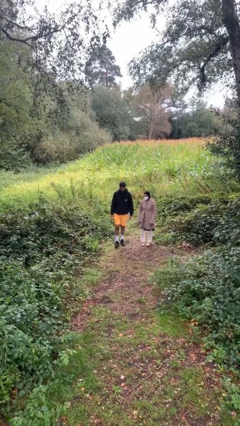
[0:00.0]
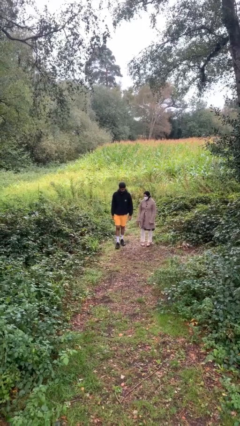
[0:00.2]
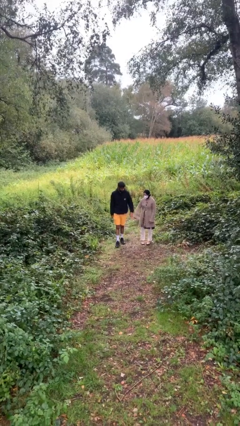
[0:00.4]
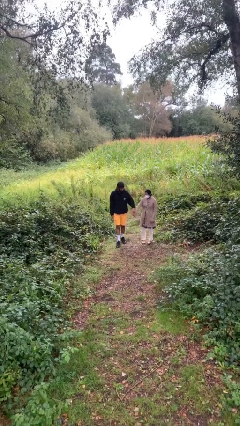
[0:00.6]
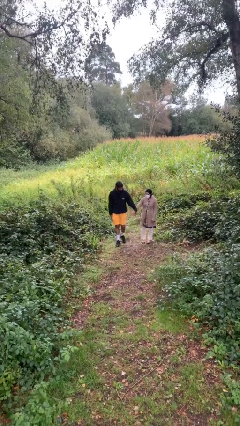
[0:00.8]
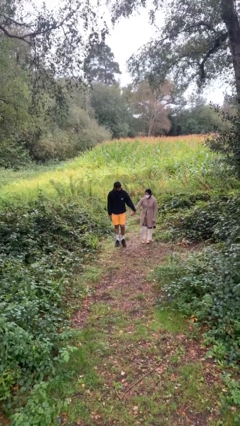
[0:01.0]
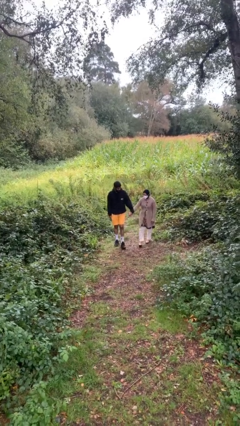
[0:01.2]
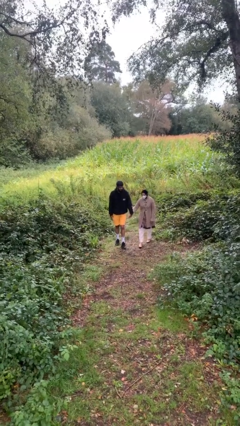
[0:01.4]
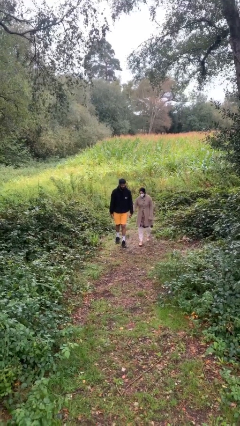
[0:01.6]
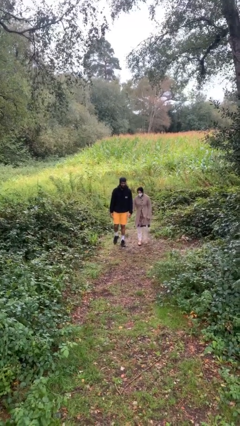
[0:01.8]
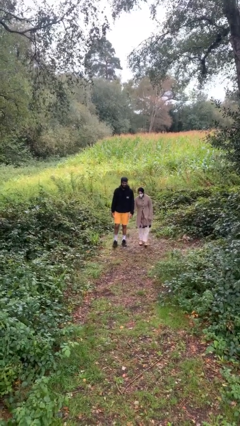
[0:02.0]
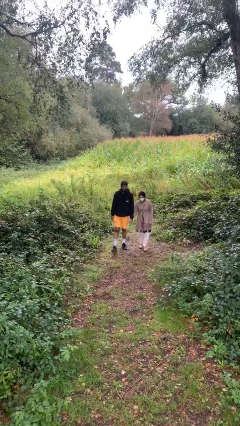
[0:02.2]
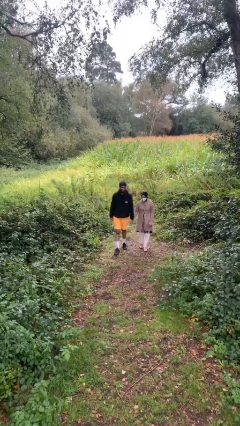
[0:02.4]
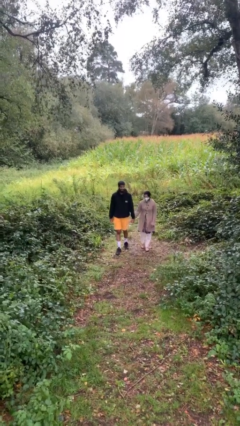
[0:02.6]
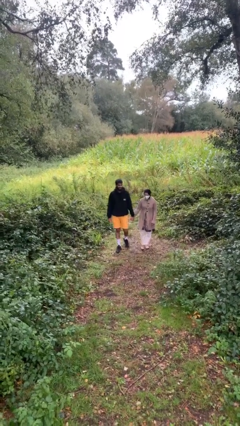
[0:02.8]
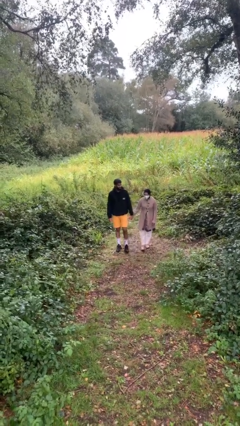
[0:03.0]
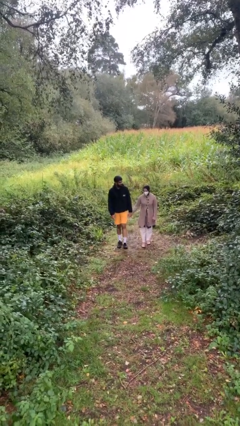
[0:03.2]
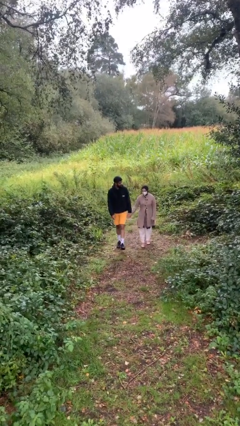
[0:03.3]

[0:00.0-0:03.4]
person holds hand

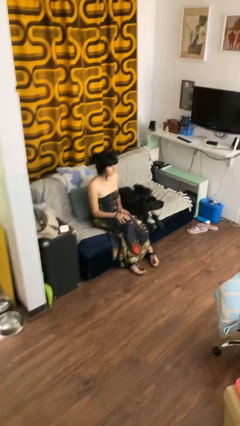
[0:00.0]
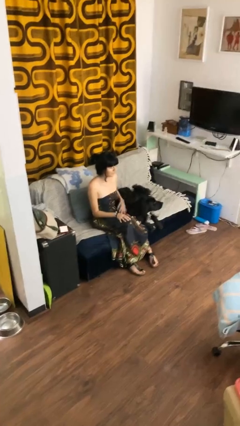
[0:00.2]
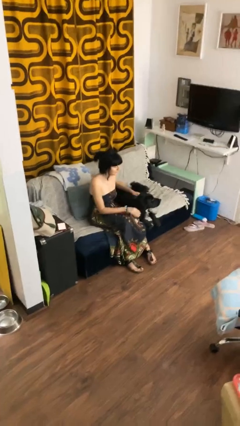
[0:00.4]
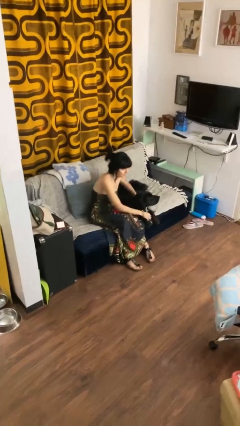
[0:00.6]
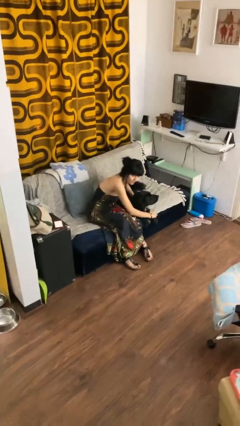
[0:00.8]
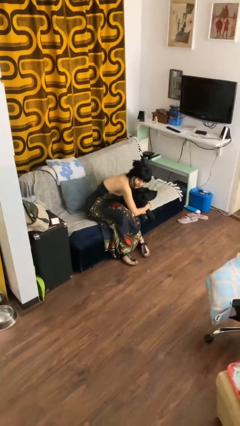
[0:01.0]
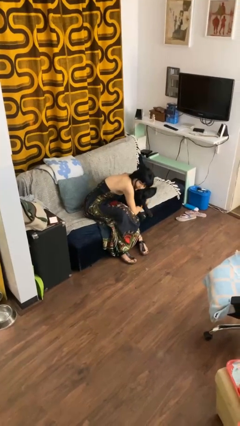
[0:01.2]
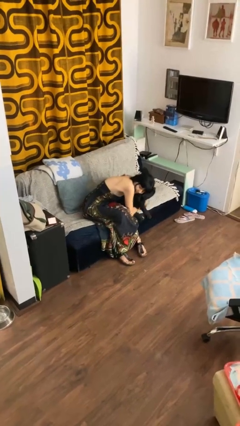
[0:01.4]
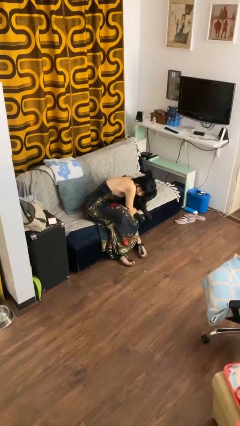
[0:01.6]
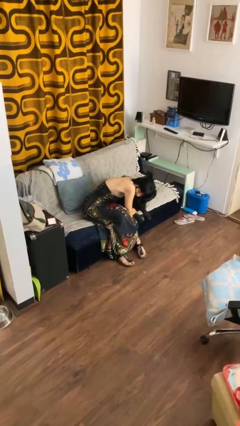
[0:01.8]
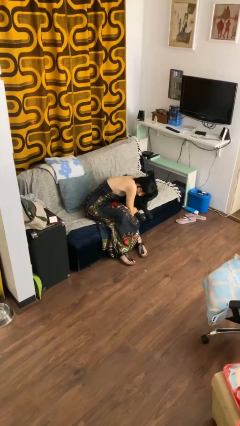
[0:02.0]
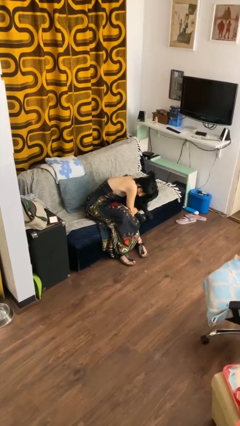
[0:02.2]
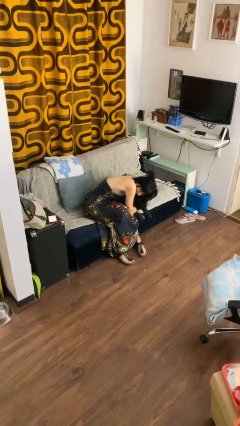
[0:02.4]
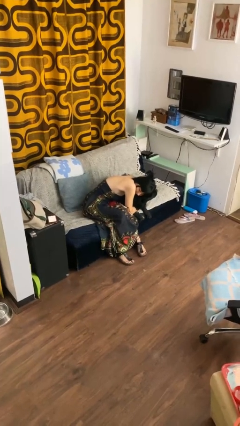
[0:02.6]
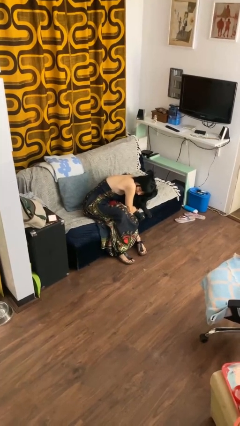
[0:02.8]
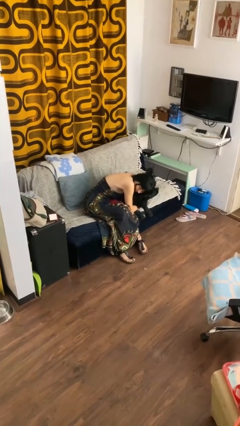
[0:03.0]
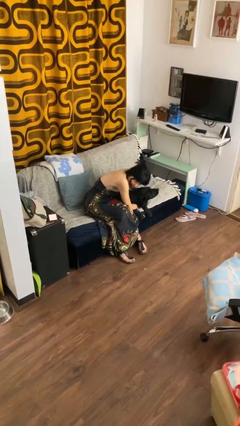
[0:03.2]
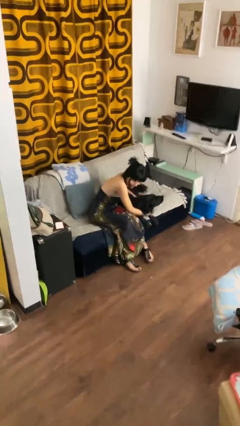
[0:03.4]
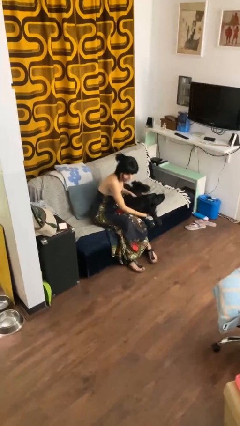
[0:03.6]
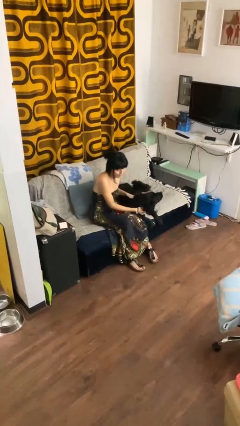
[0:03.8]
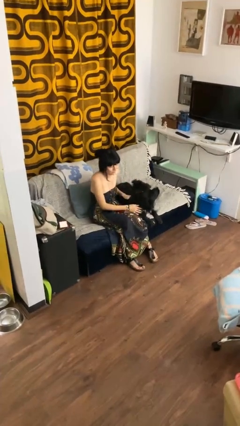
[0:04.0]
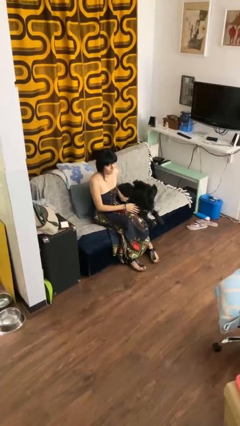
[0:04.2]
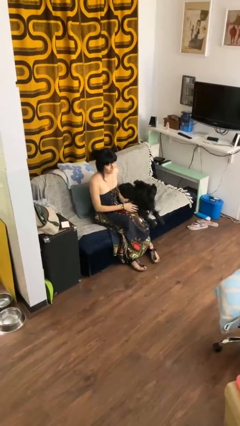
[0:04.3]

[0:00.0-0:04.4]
person hugs dog

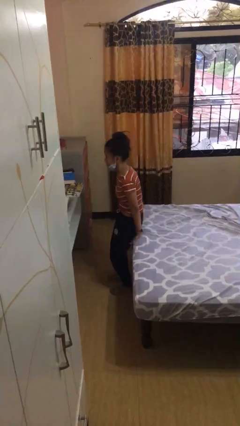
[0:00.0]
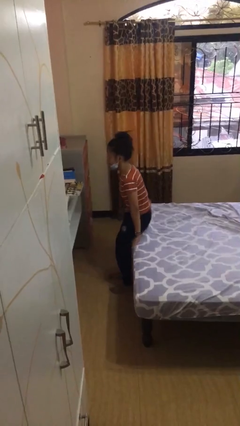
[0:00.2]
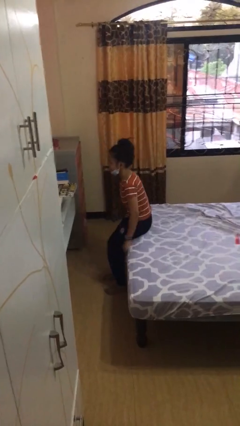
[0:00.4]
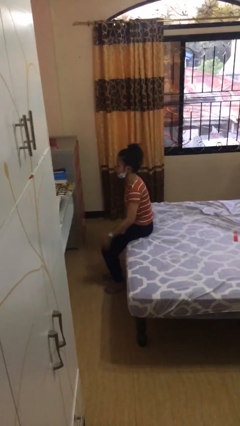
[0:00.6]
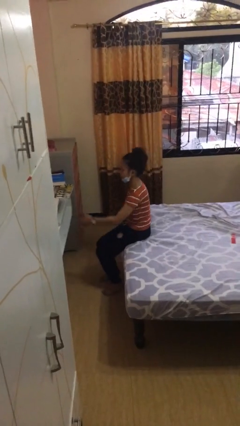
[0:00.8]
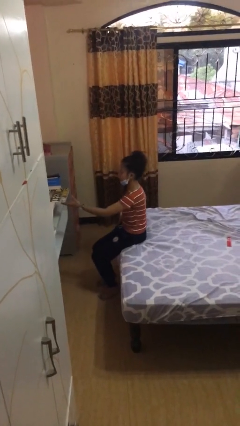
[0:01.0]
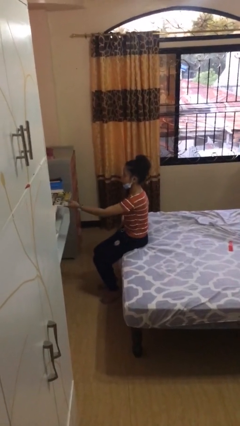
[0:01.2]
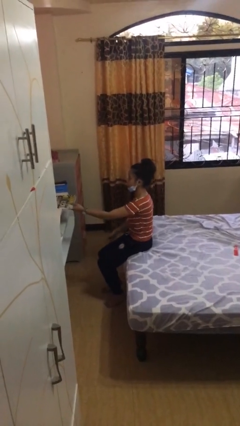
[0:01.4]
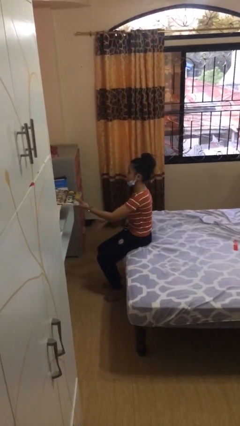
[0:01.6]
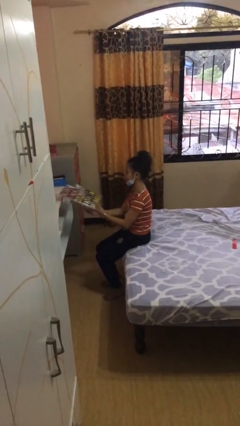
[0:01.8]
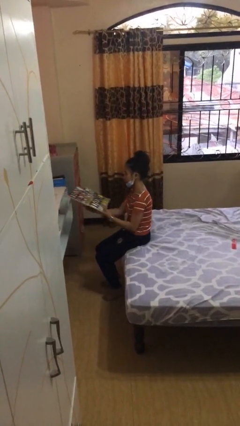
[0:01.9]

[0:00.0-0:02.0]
person sits down

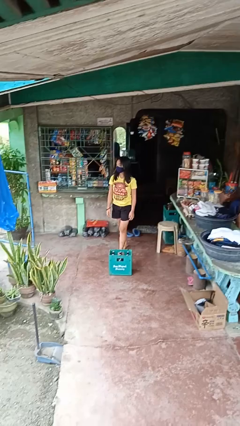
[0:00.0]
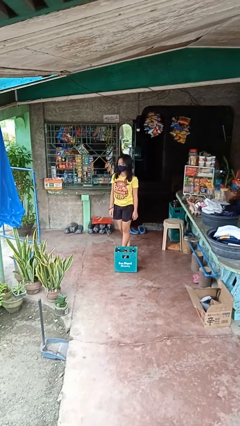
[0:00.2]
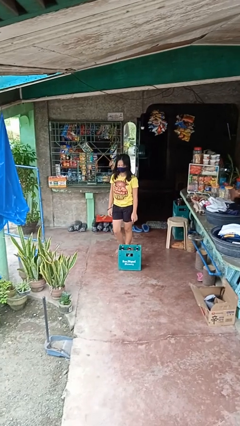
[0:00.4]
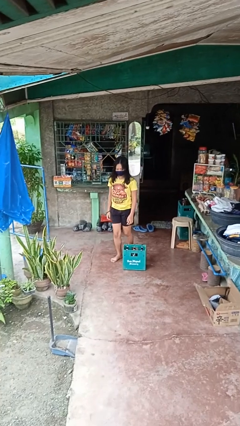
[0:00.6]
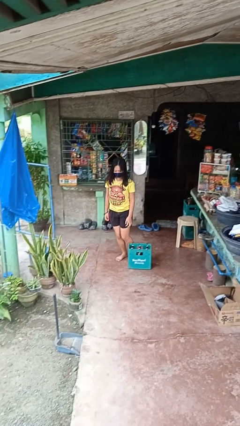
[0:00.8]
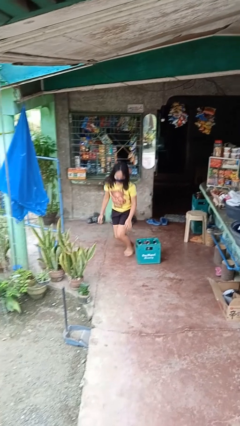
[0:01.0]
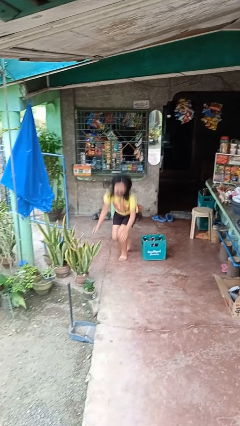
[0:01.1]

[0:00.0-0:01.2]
person trips on object on floor

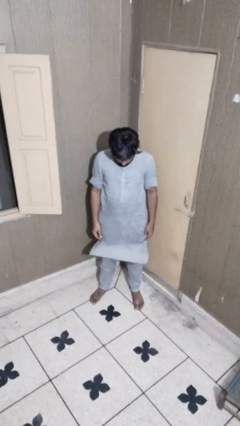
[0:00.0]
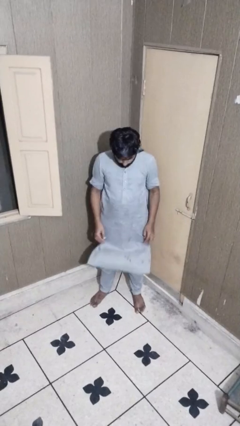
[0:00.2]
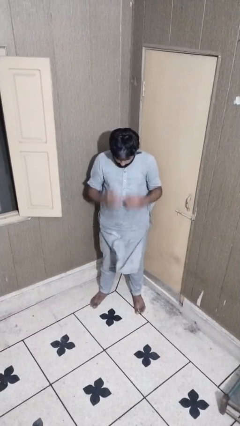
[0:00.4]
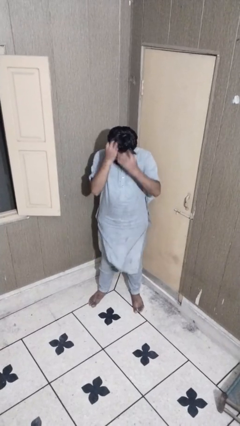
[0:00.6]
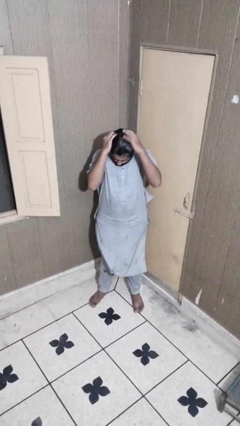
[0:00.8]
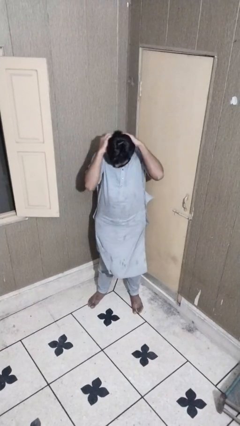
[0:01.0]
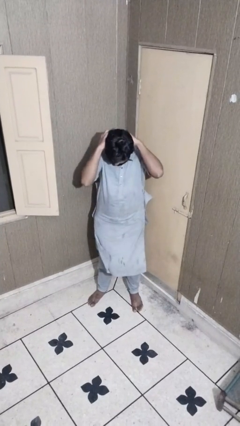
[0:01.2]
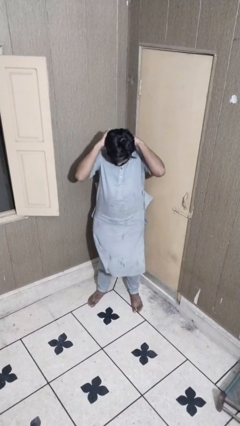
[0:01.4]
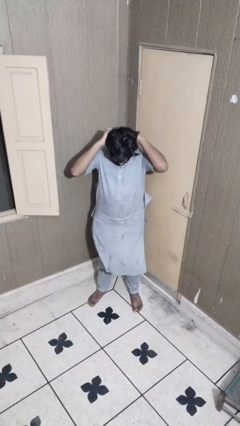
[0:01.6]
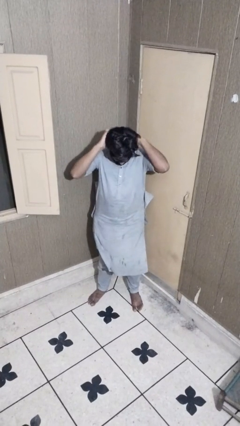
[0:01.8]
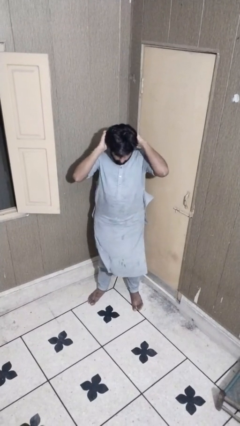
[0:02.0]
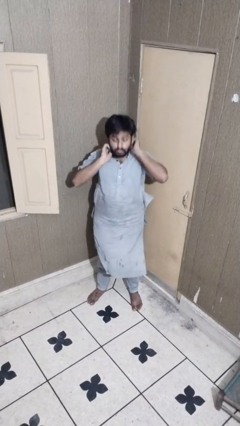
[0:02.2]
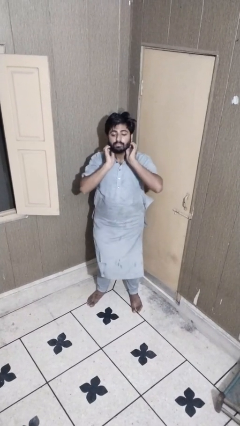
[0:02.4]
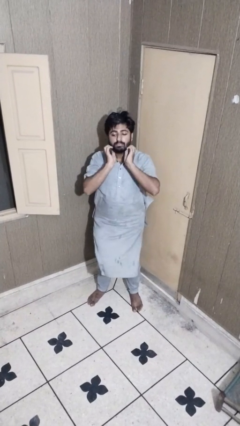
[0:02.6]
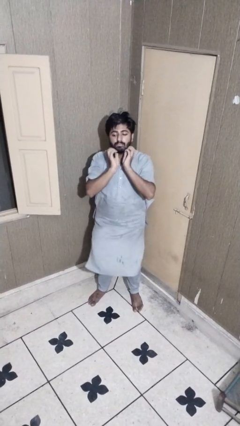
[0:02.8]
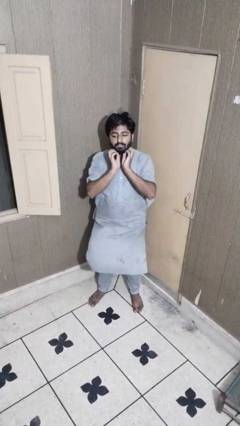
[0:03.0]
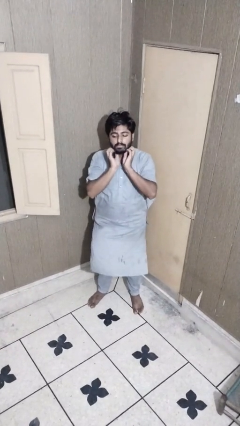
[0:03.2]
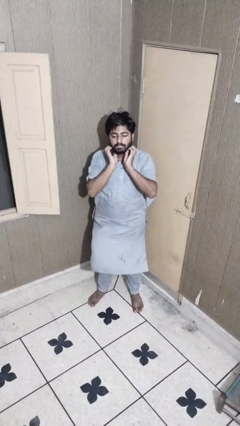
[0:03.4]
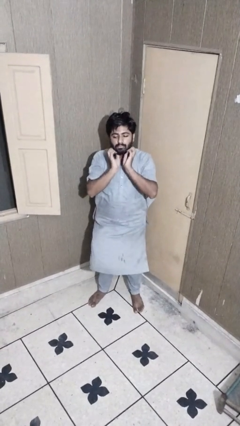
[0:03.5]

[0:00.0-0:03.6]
person scratches face

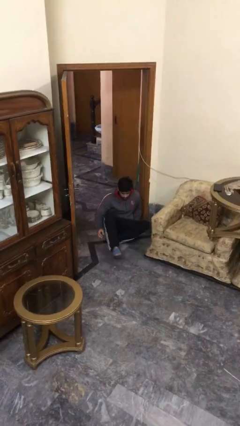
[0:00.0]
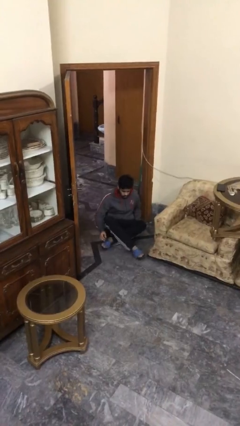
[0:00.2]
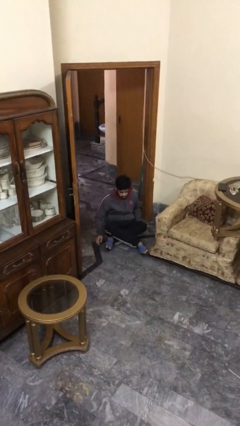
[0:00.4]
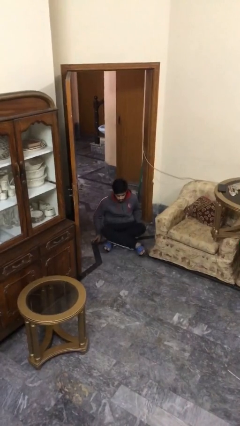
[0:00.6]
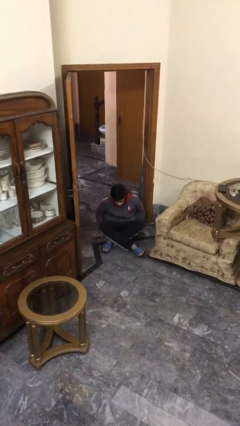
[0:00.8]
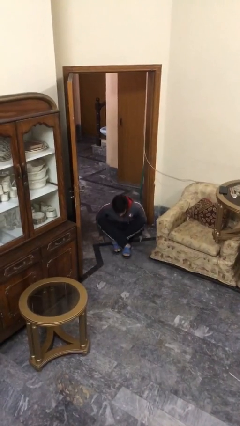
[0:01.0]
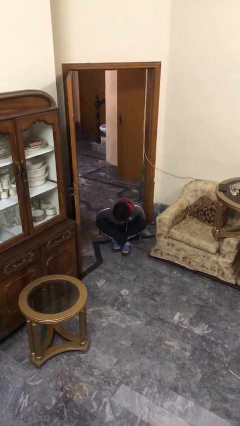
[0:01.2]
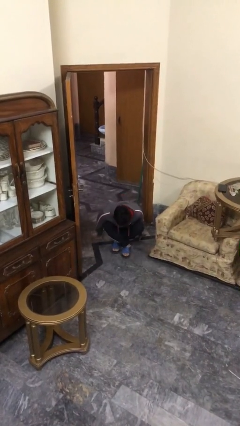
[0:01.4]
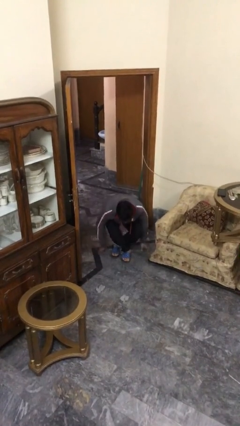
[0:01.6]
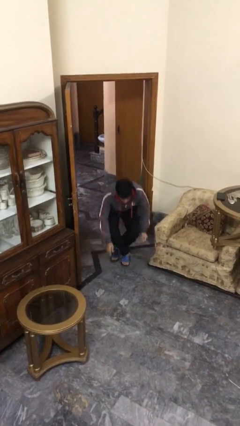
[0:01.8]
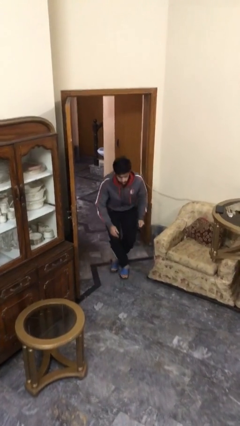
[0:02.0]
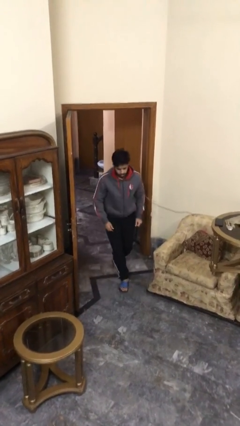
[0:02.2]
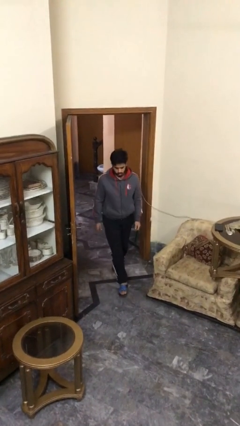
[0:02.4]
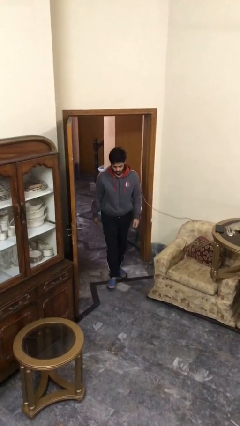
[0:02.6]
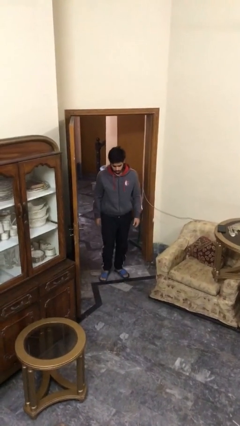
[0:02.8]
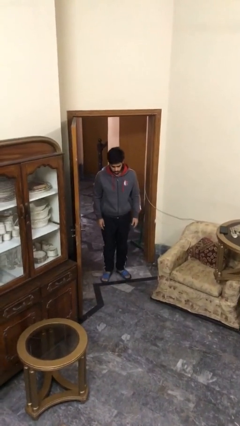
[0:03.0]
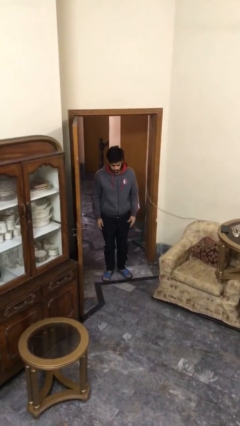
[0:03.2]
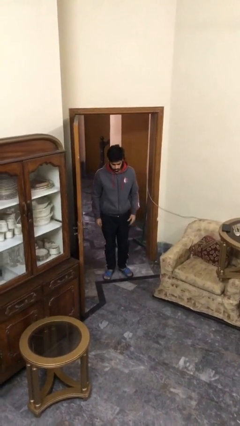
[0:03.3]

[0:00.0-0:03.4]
person stands up
